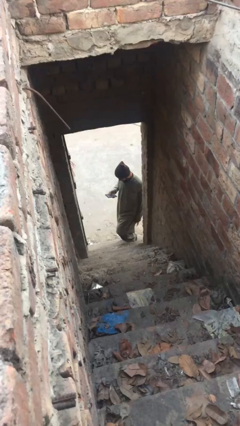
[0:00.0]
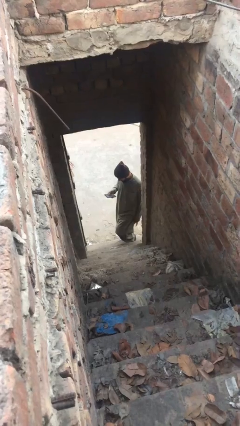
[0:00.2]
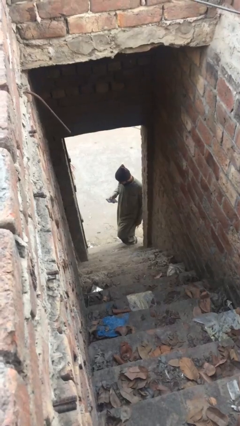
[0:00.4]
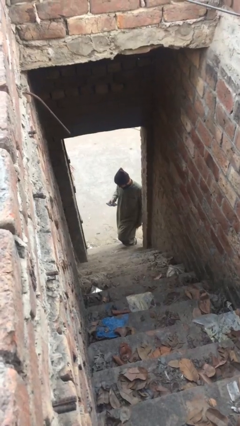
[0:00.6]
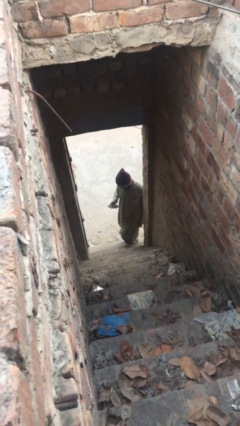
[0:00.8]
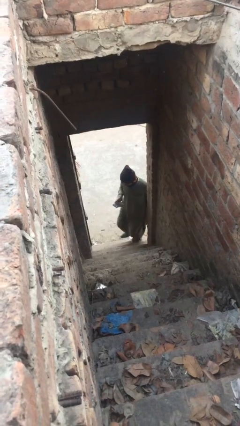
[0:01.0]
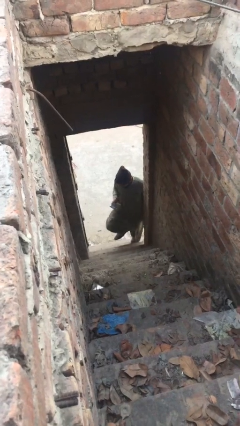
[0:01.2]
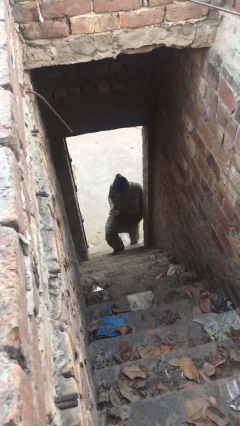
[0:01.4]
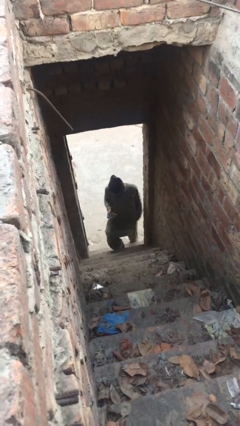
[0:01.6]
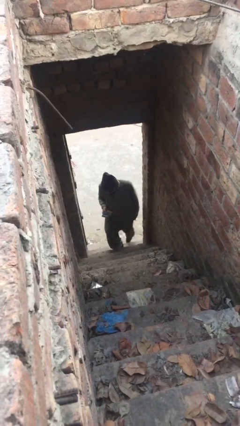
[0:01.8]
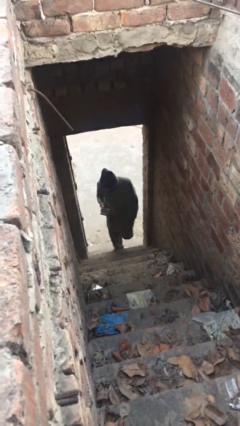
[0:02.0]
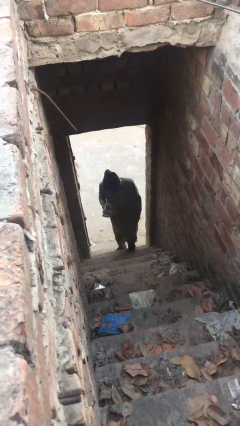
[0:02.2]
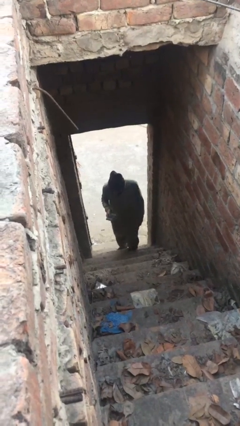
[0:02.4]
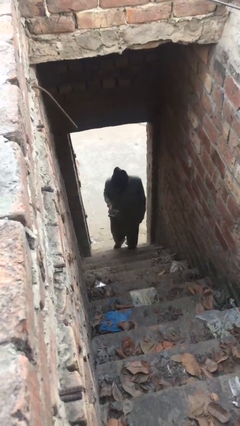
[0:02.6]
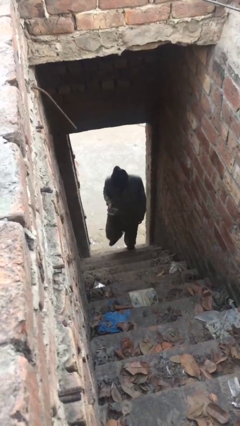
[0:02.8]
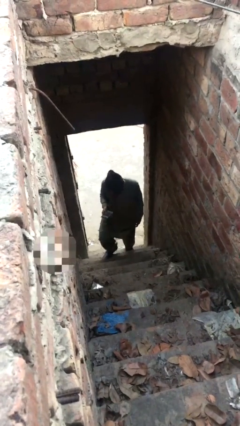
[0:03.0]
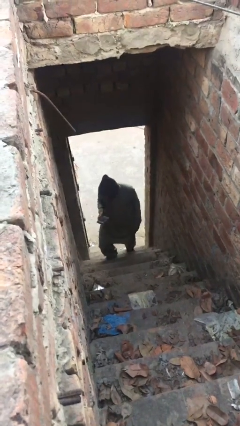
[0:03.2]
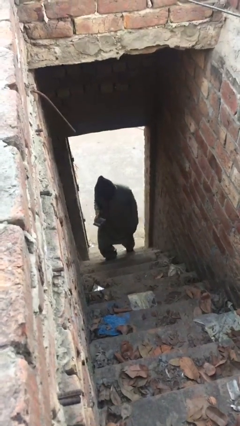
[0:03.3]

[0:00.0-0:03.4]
person enters scene through structure

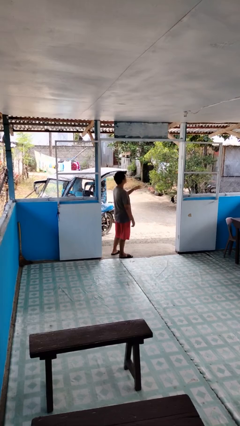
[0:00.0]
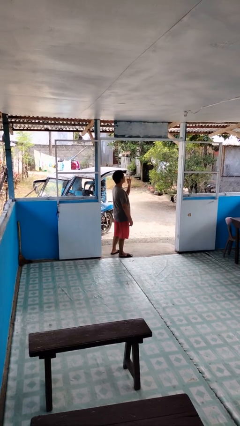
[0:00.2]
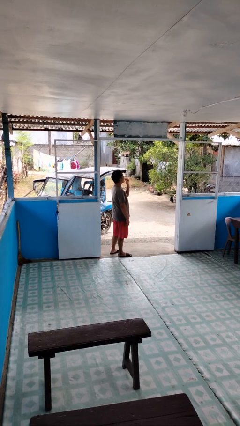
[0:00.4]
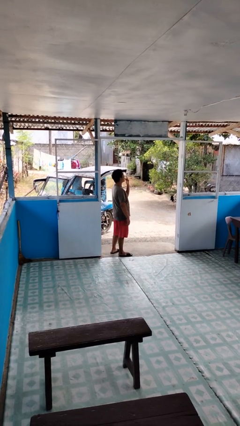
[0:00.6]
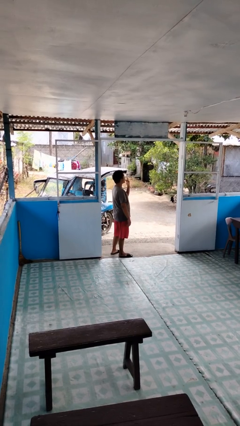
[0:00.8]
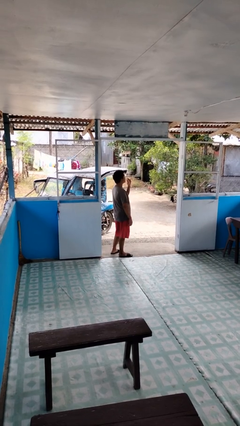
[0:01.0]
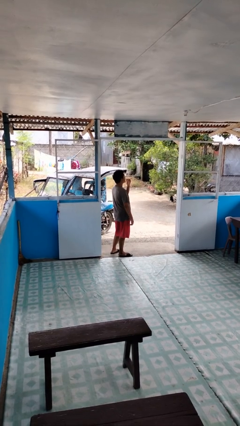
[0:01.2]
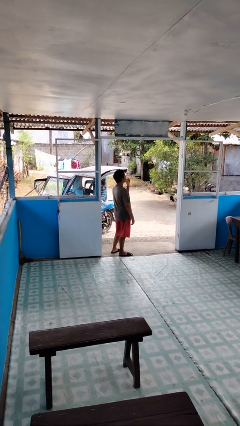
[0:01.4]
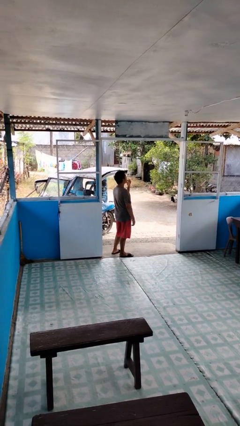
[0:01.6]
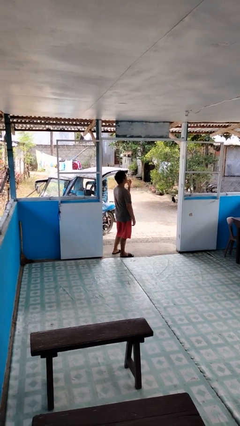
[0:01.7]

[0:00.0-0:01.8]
person licks fingers

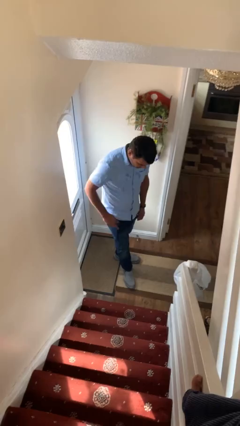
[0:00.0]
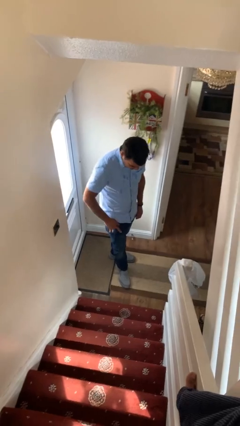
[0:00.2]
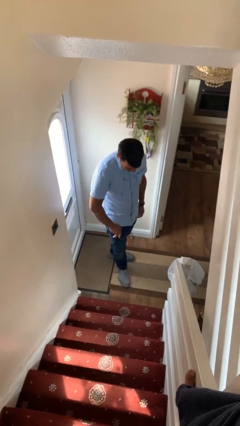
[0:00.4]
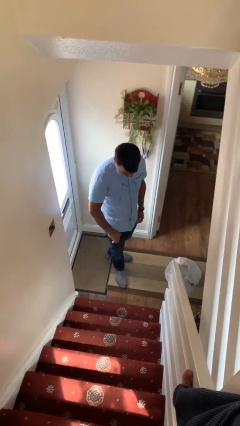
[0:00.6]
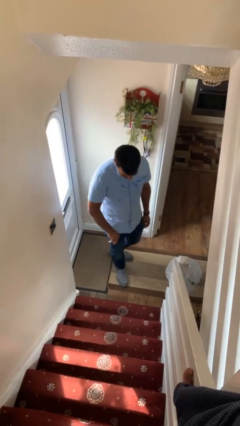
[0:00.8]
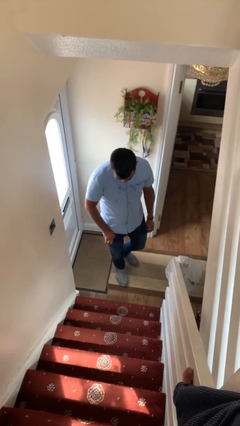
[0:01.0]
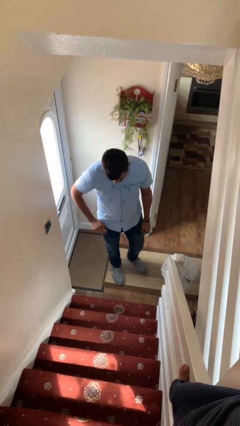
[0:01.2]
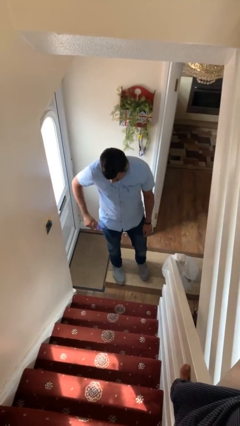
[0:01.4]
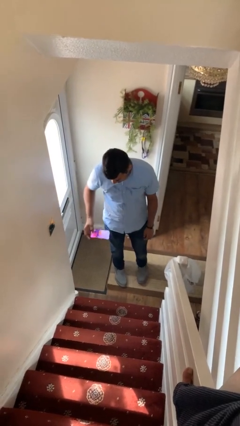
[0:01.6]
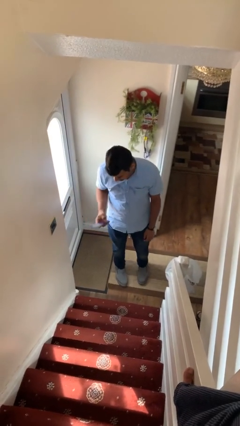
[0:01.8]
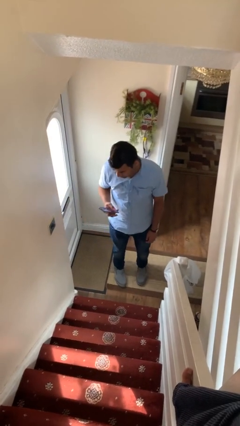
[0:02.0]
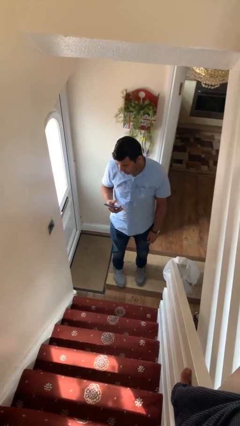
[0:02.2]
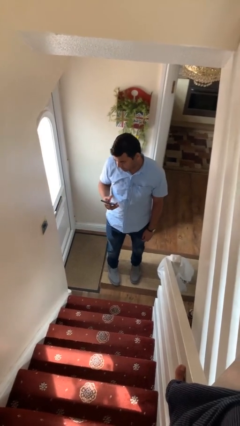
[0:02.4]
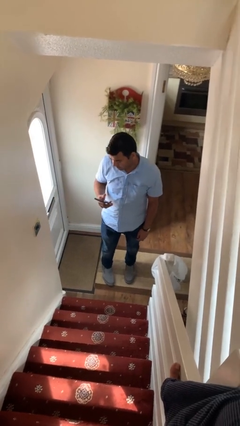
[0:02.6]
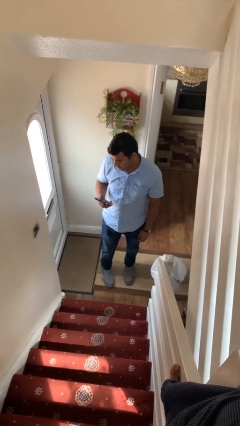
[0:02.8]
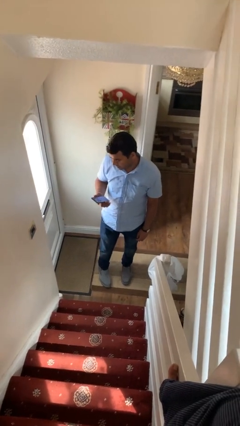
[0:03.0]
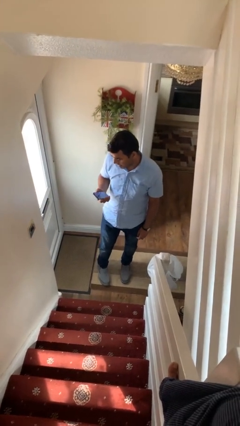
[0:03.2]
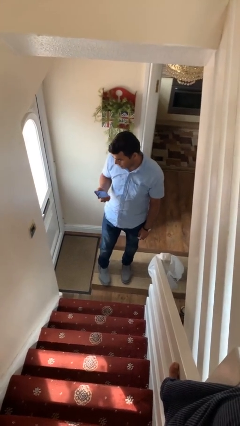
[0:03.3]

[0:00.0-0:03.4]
person takes phone from pocket

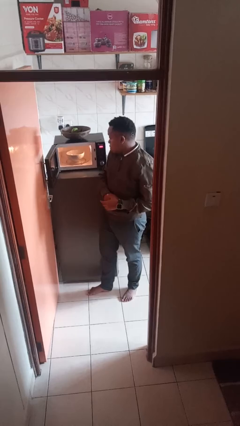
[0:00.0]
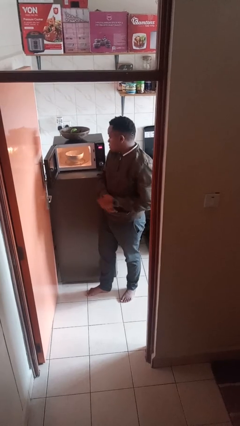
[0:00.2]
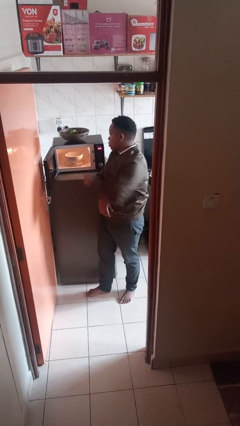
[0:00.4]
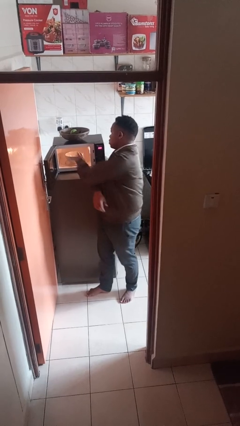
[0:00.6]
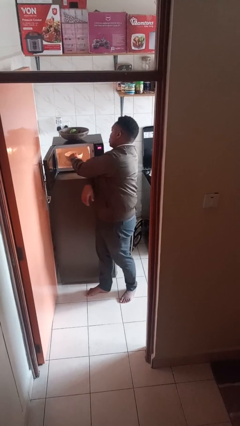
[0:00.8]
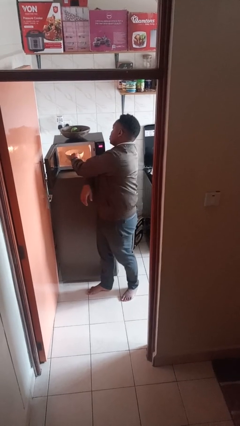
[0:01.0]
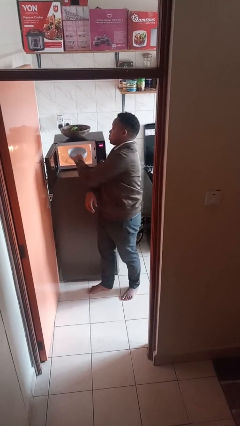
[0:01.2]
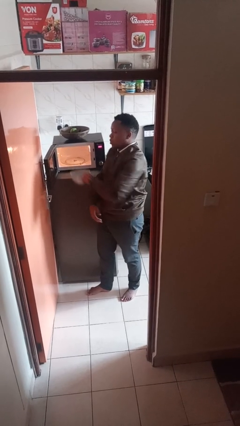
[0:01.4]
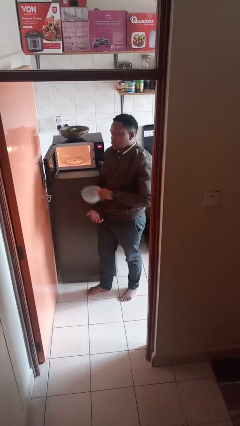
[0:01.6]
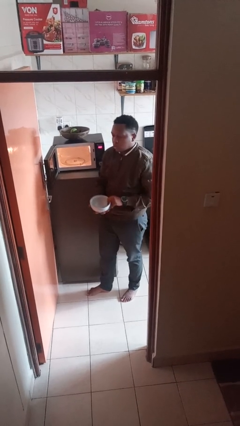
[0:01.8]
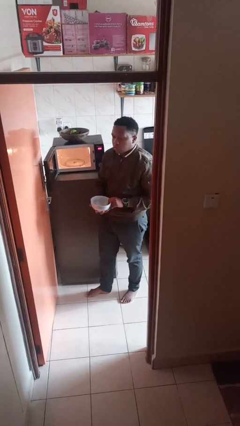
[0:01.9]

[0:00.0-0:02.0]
person takes object from microwave

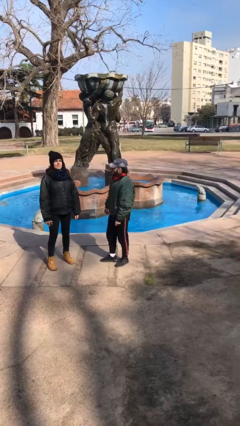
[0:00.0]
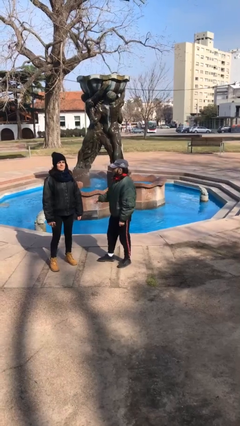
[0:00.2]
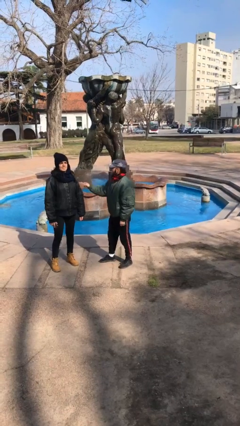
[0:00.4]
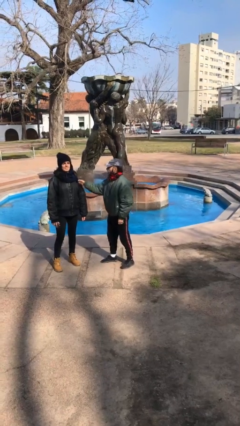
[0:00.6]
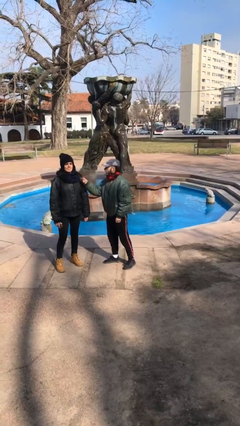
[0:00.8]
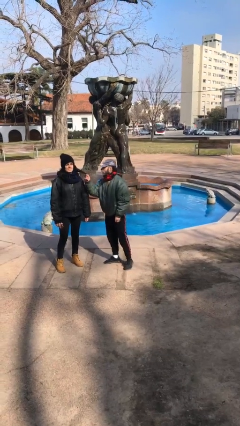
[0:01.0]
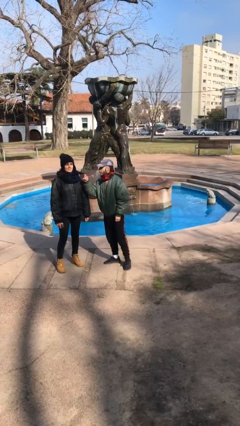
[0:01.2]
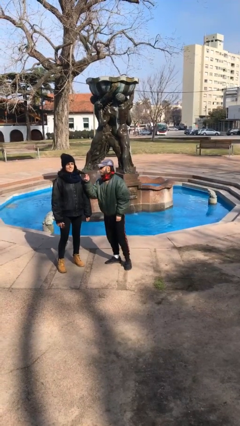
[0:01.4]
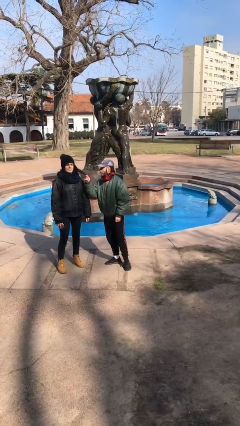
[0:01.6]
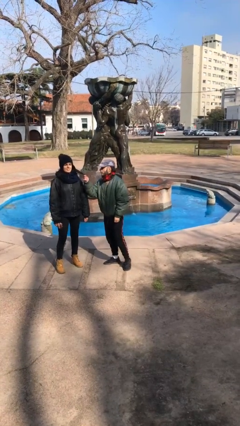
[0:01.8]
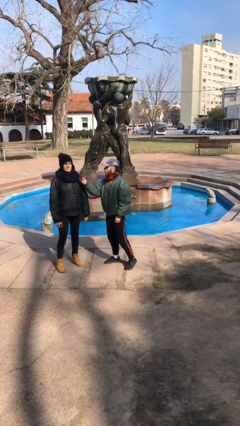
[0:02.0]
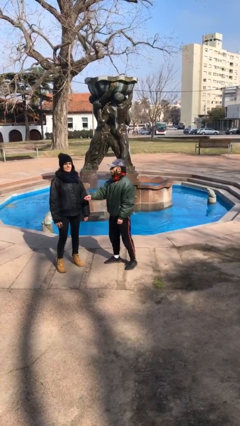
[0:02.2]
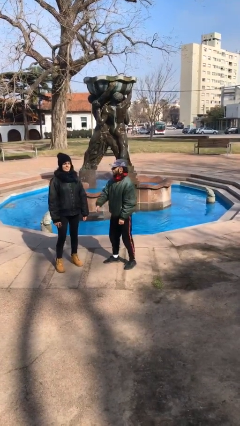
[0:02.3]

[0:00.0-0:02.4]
person grabs person by hair

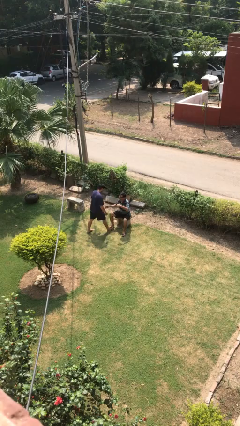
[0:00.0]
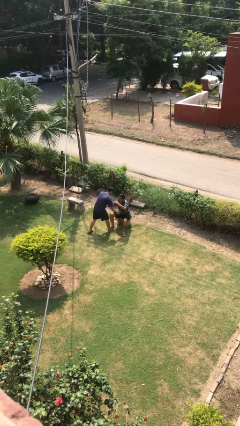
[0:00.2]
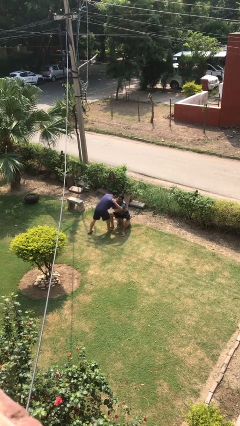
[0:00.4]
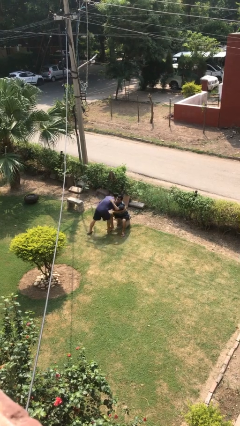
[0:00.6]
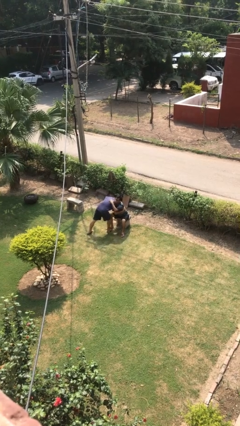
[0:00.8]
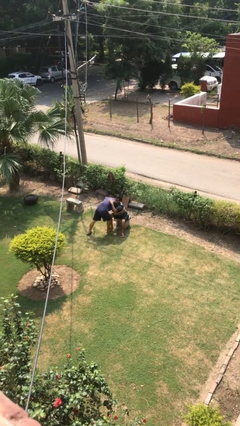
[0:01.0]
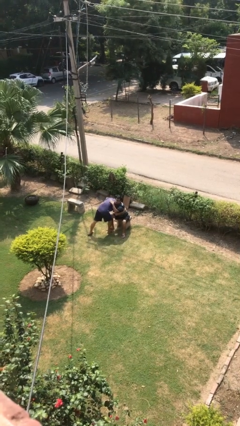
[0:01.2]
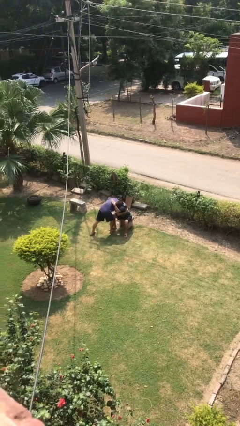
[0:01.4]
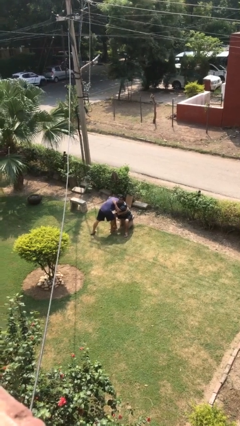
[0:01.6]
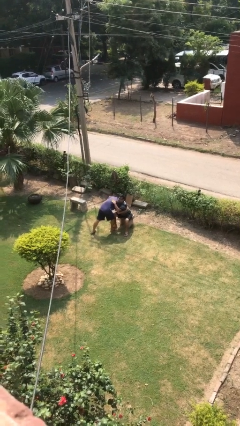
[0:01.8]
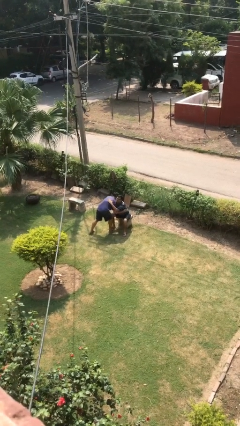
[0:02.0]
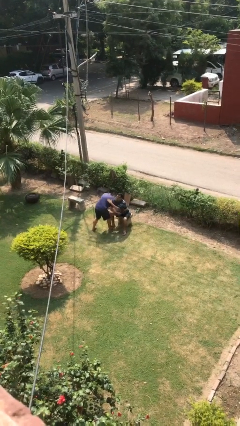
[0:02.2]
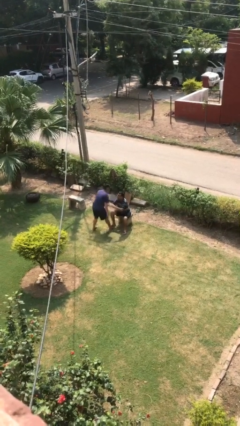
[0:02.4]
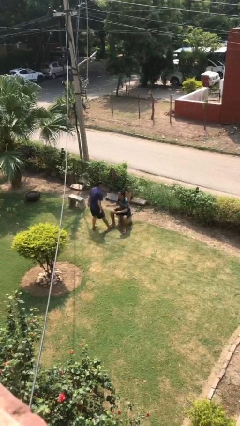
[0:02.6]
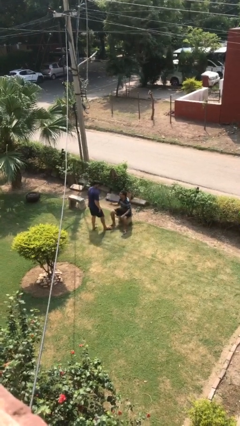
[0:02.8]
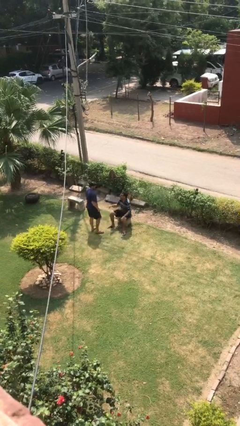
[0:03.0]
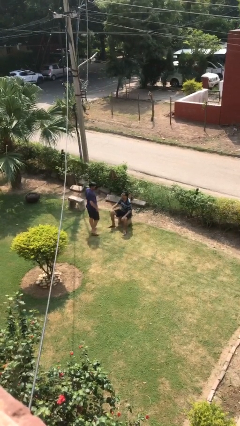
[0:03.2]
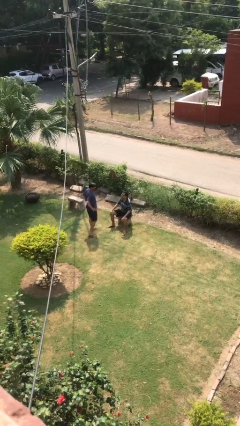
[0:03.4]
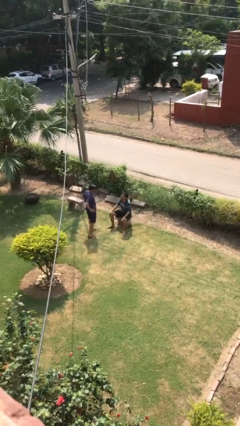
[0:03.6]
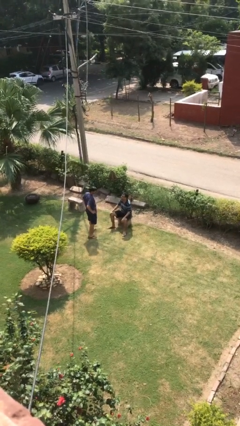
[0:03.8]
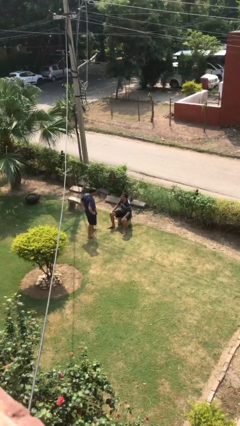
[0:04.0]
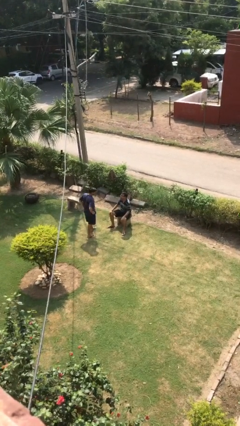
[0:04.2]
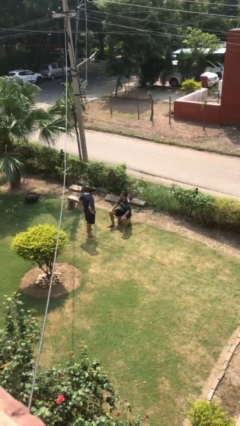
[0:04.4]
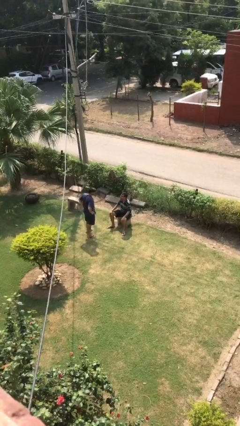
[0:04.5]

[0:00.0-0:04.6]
person embraces person

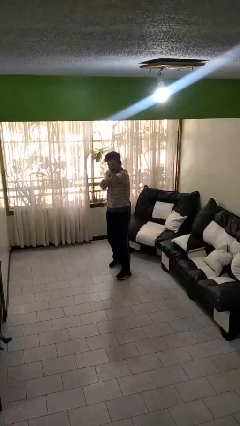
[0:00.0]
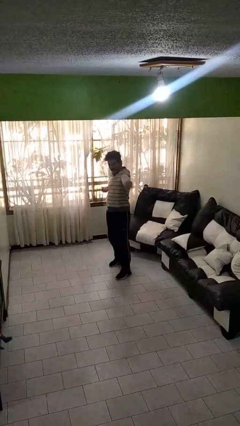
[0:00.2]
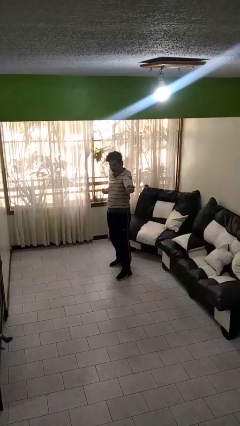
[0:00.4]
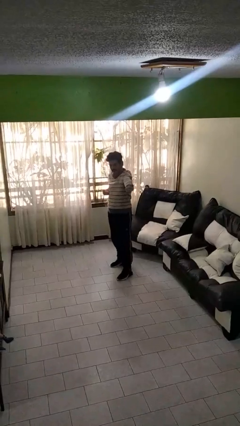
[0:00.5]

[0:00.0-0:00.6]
person karate chop
